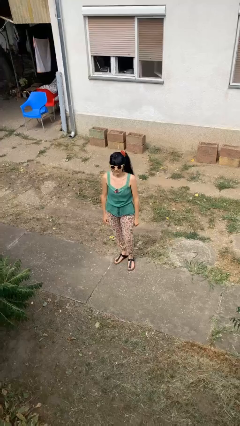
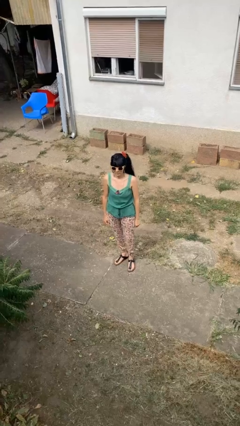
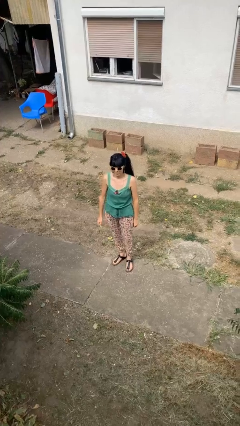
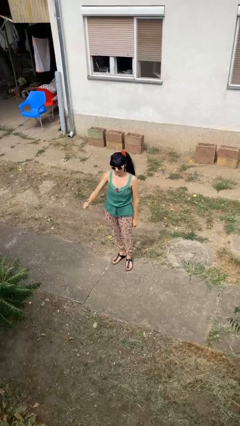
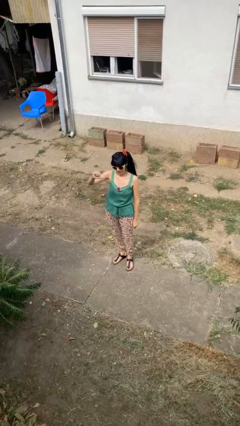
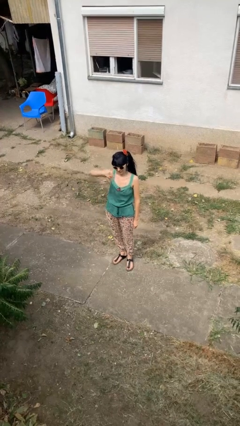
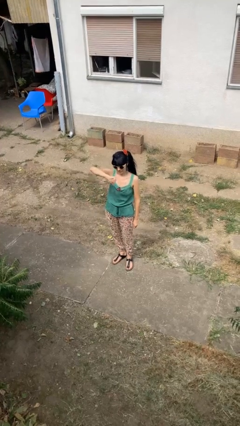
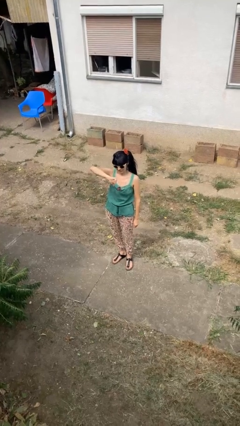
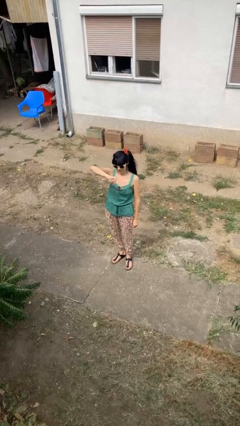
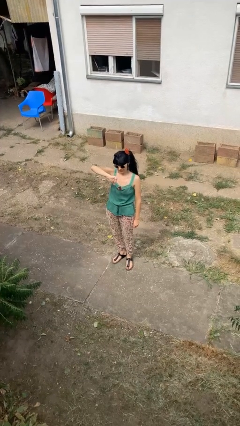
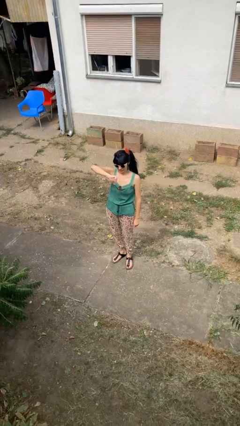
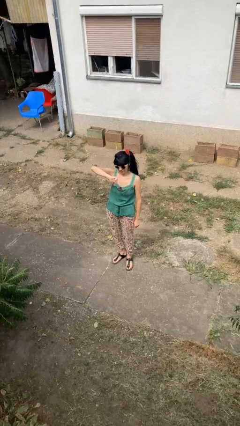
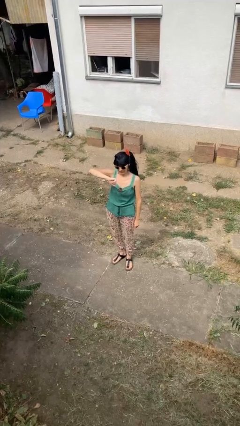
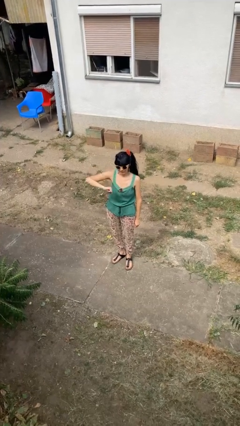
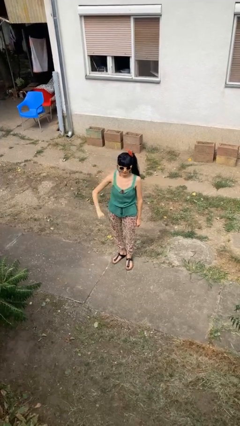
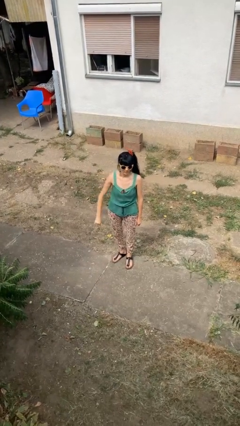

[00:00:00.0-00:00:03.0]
person gestures thumbs down

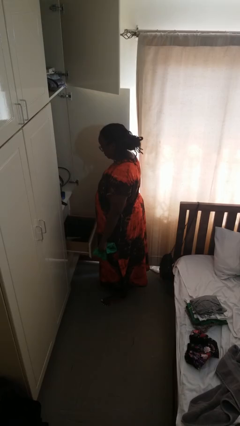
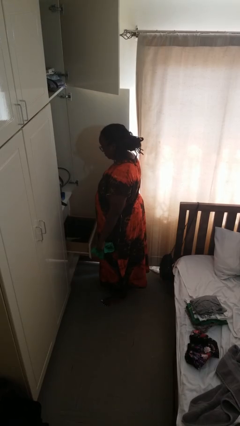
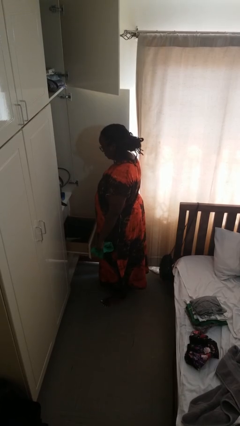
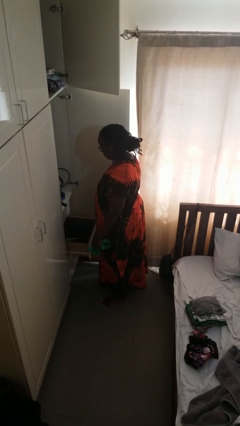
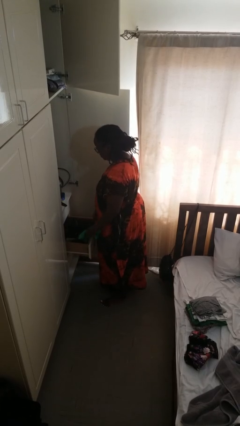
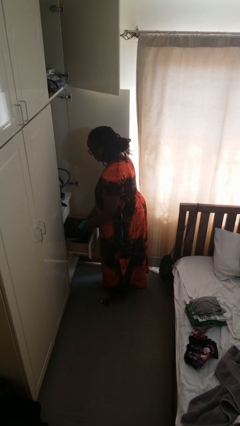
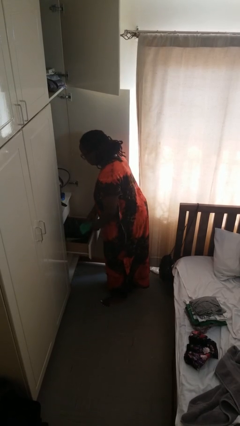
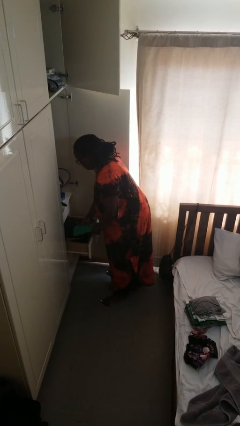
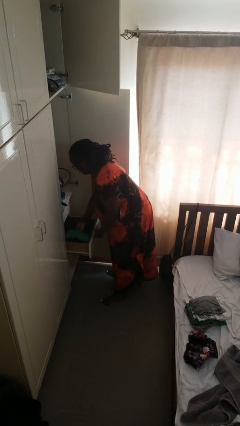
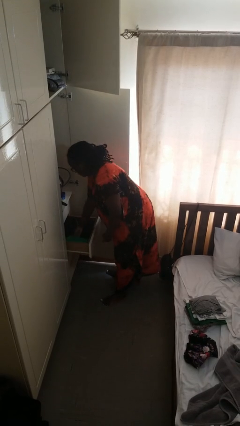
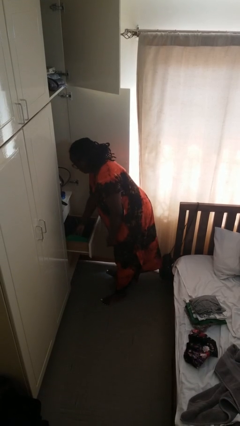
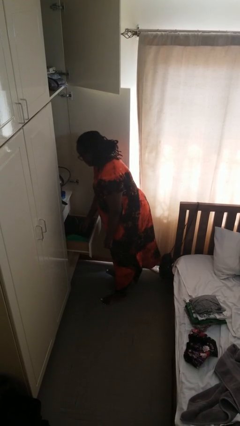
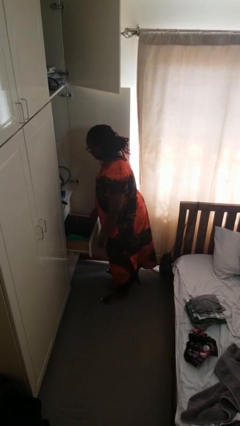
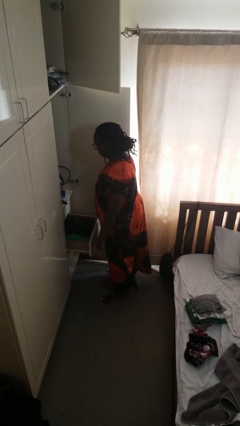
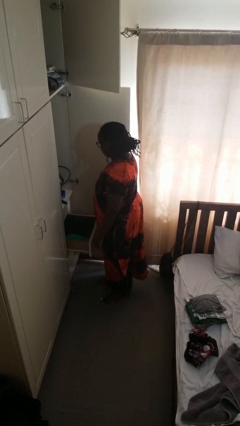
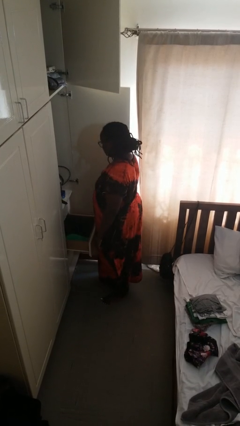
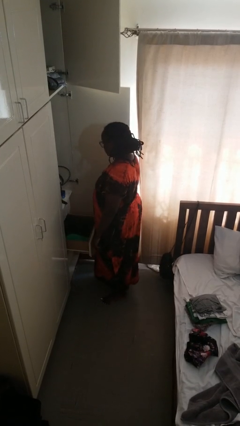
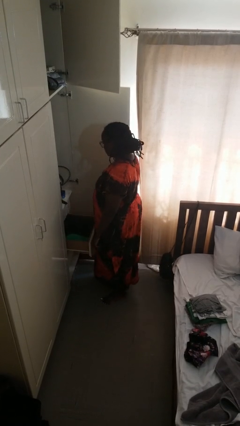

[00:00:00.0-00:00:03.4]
person puts clothes into dresser

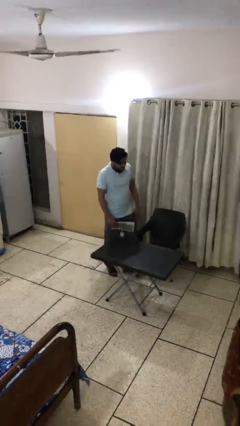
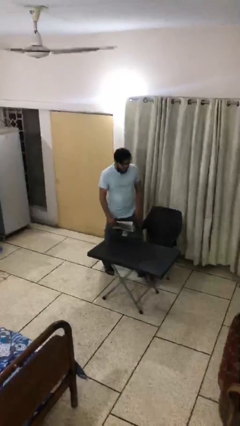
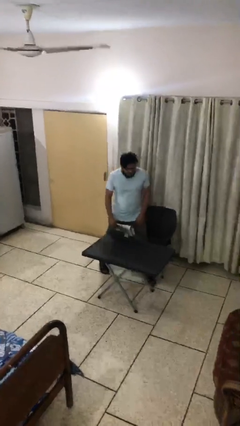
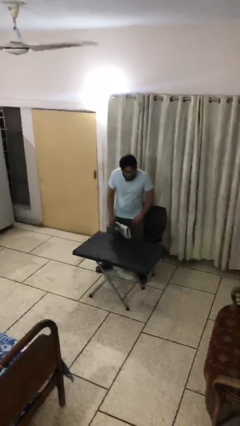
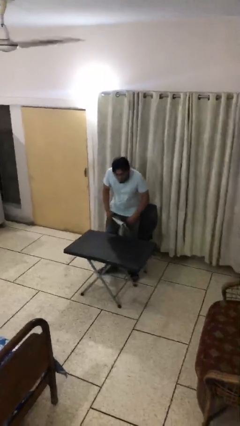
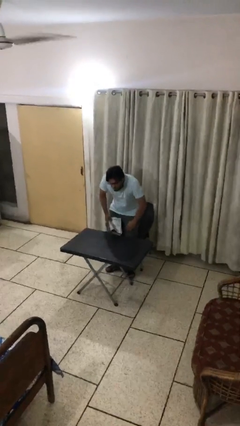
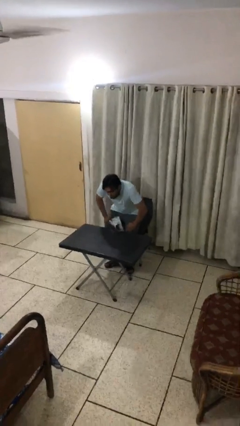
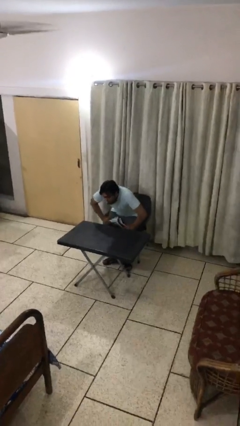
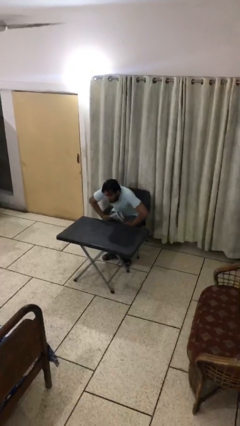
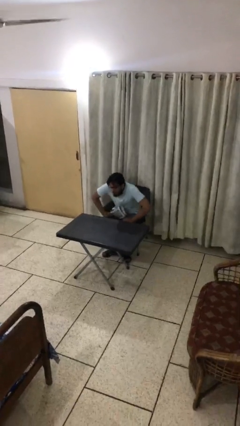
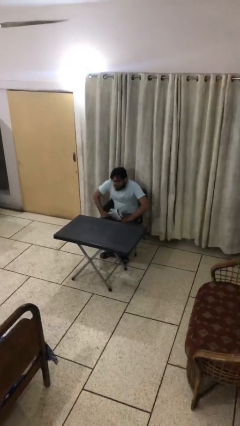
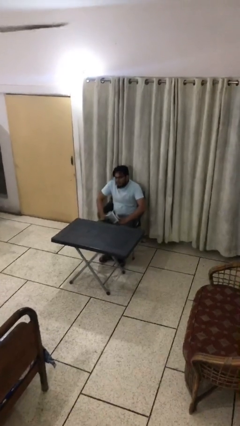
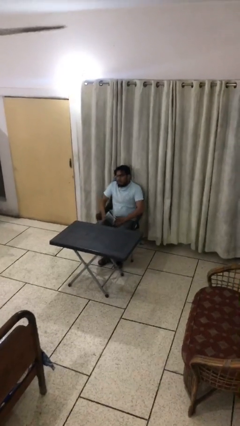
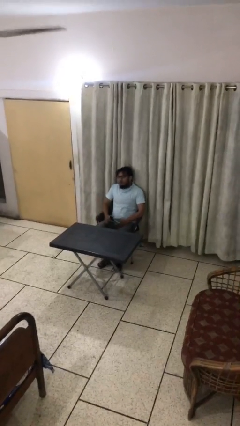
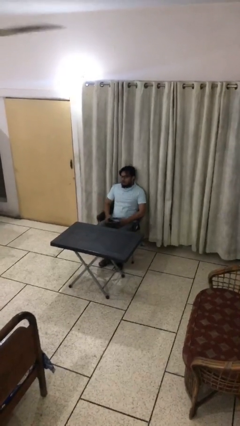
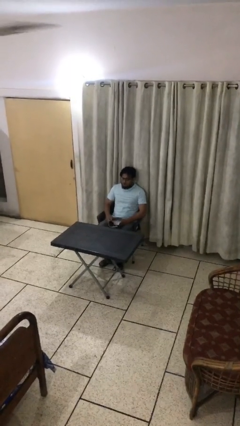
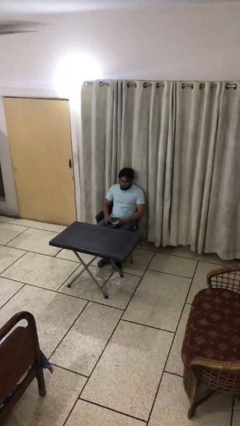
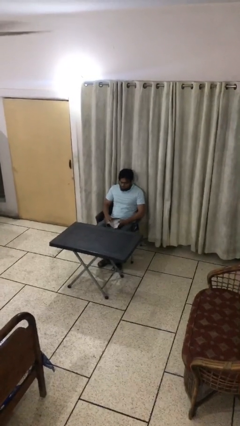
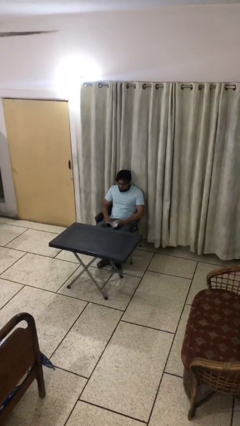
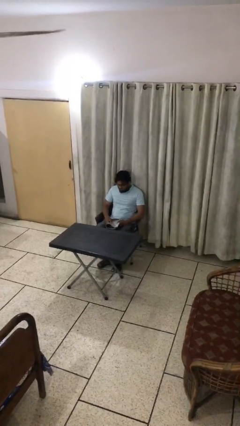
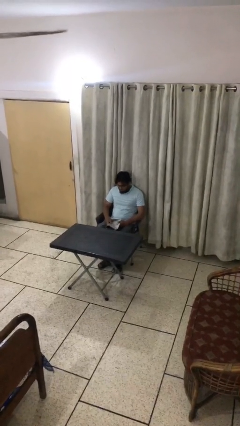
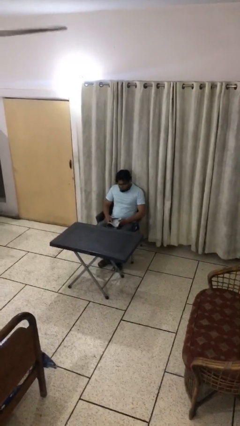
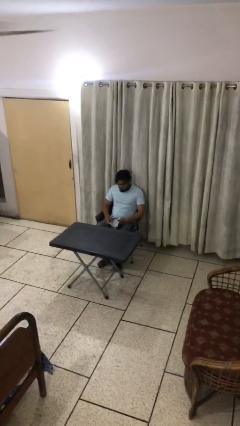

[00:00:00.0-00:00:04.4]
person sits down

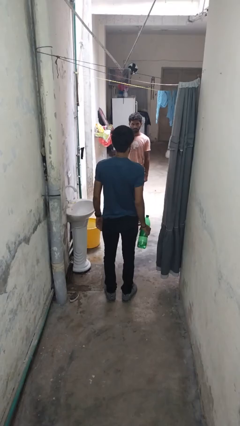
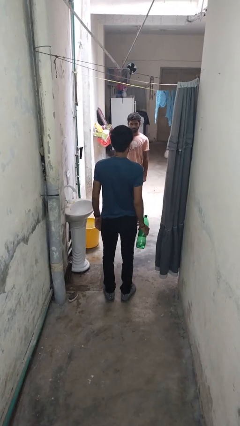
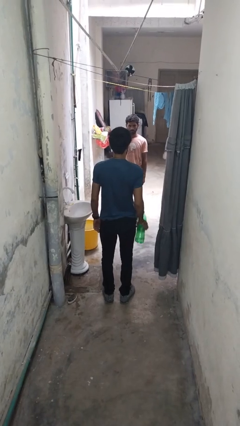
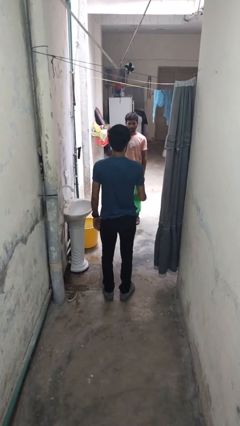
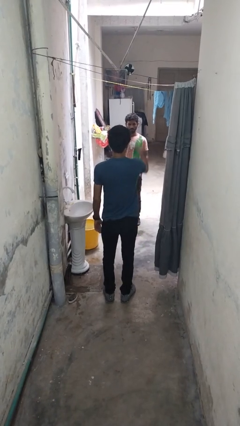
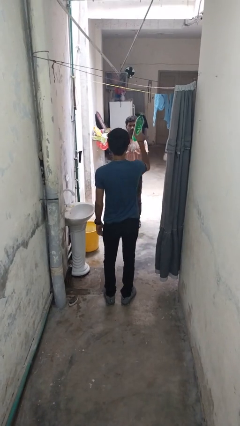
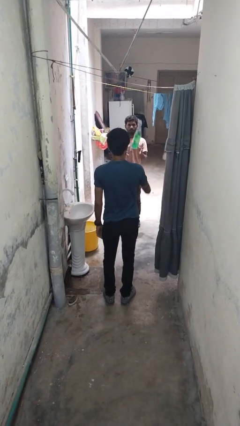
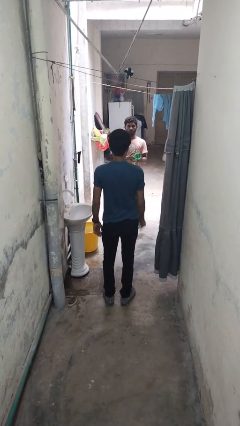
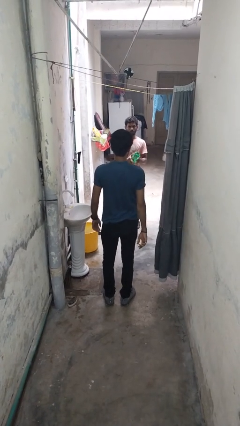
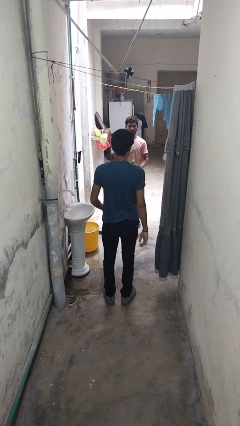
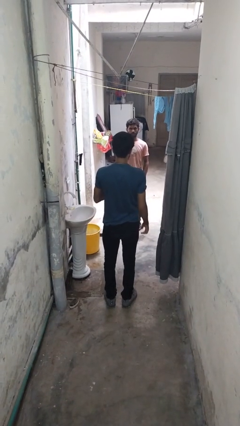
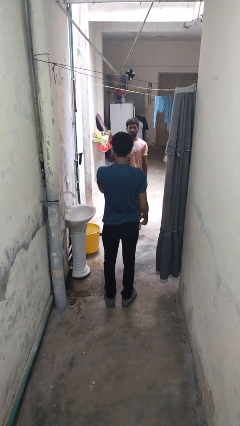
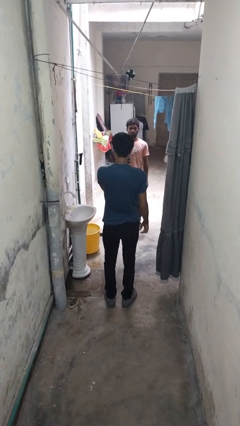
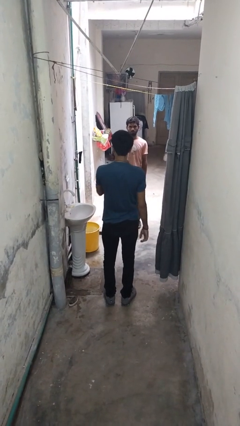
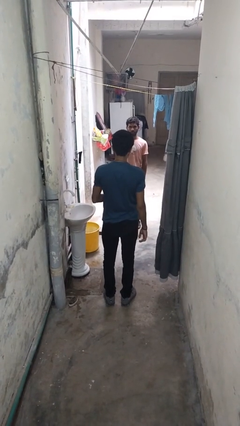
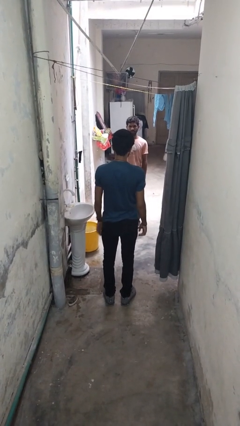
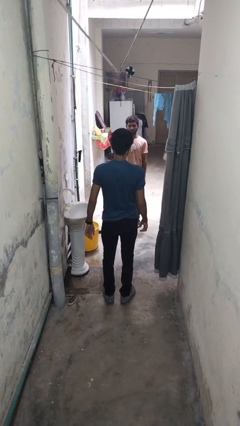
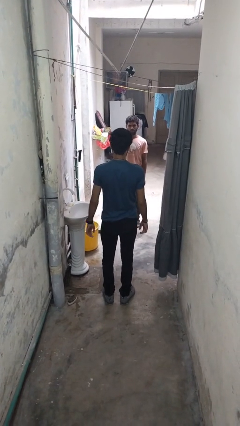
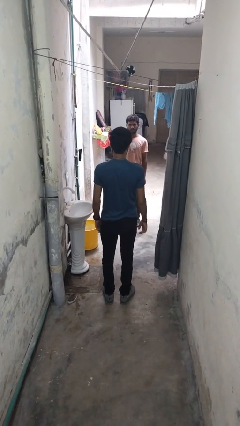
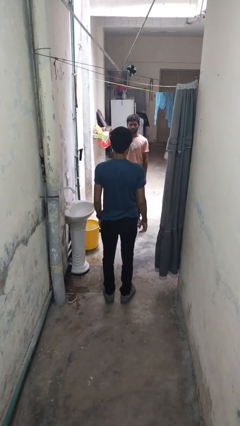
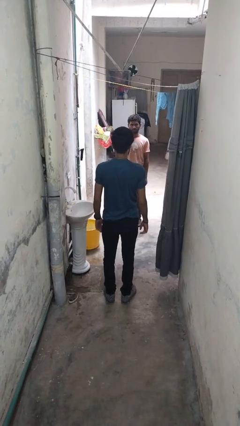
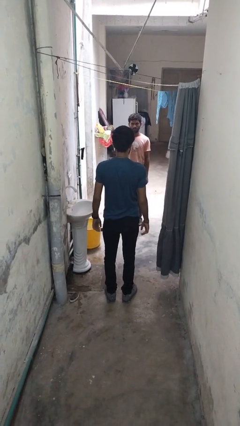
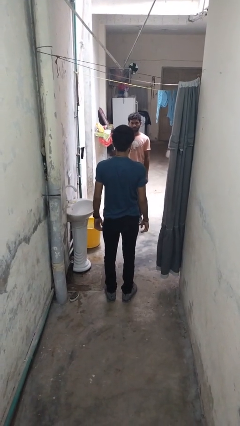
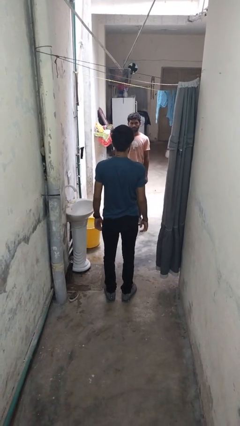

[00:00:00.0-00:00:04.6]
person throws object to person

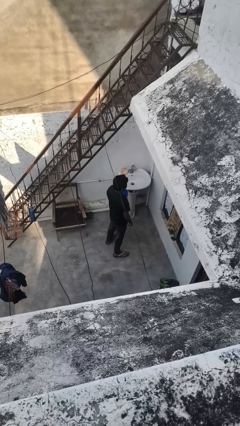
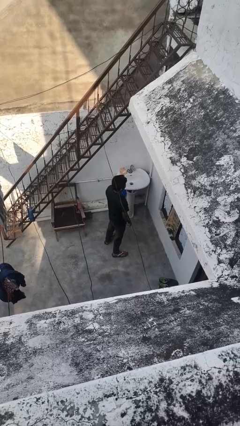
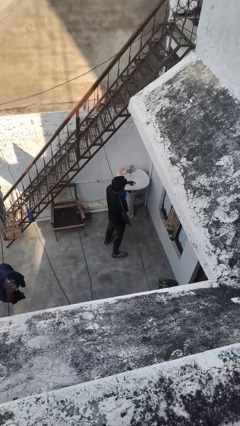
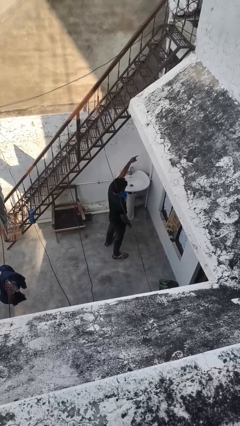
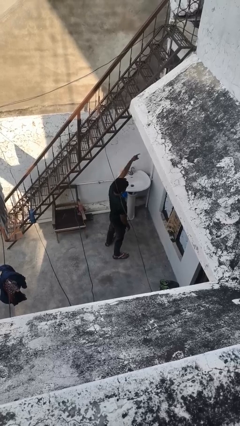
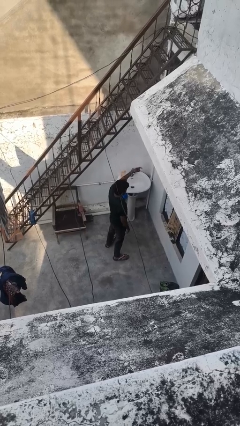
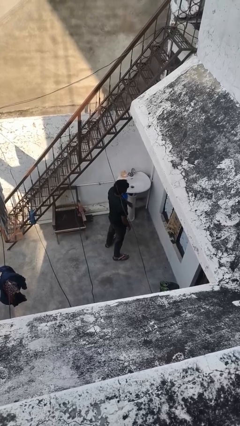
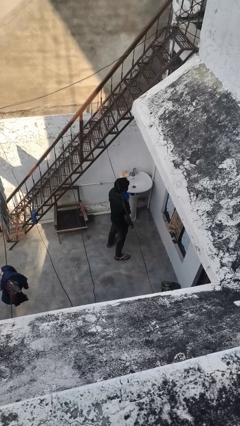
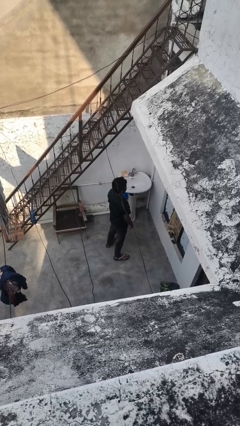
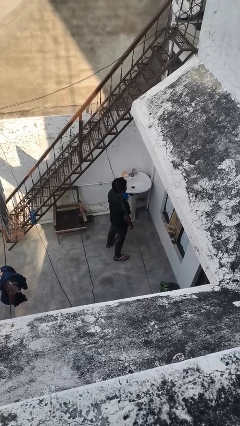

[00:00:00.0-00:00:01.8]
person gestures behind me

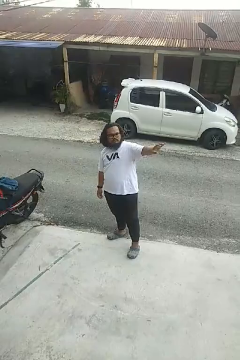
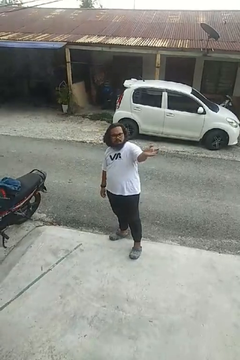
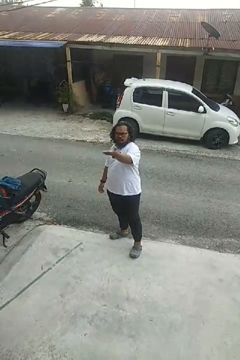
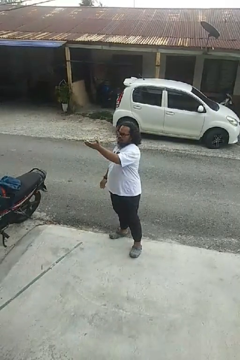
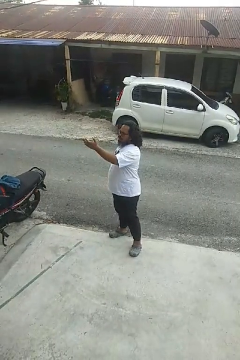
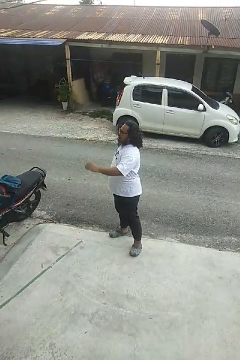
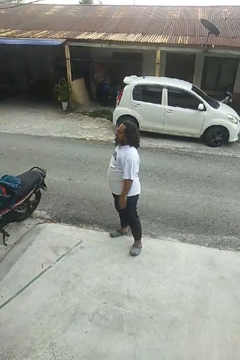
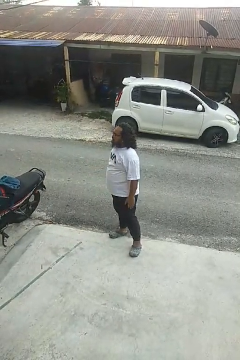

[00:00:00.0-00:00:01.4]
person gestures swipe right
